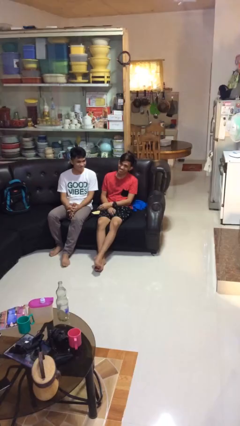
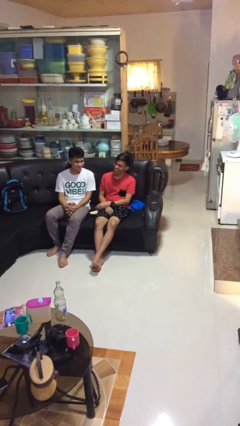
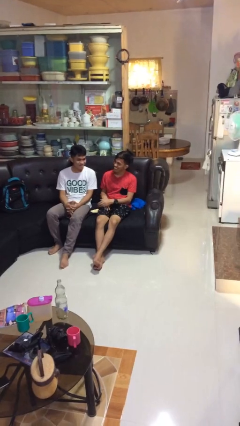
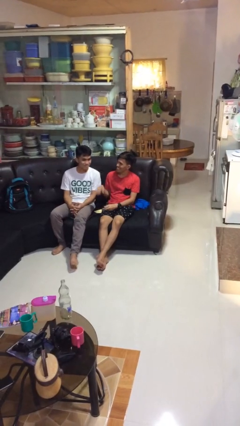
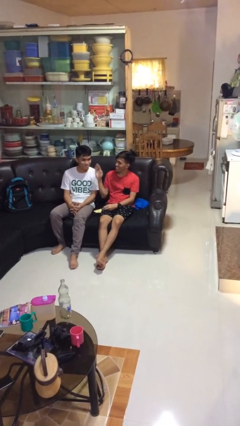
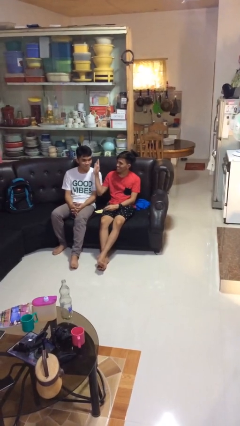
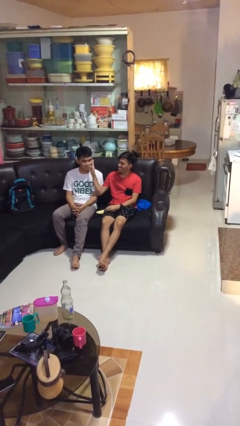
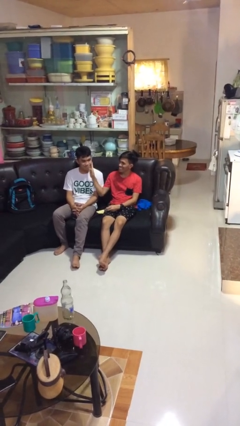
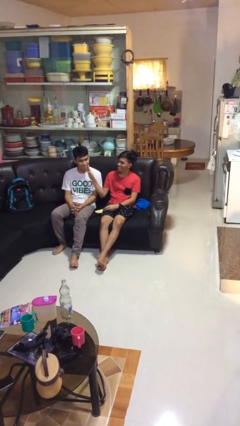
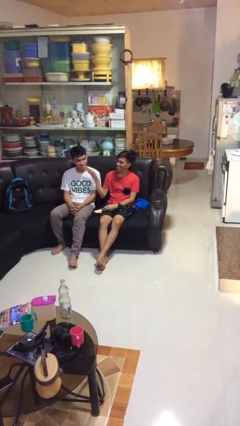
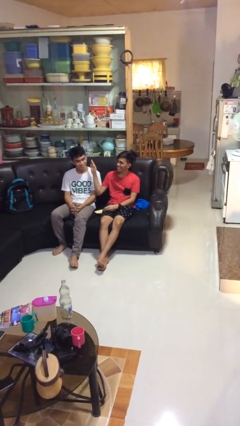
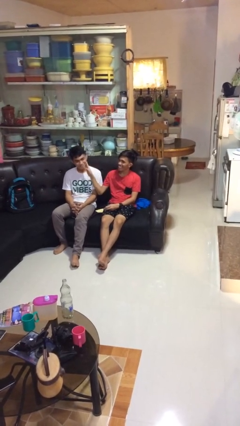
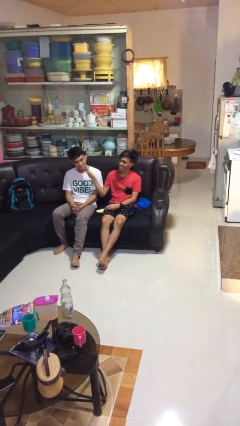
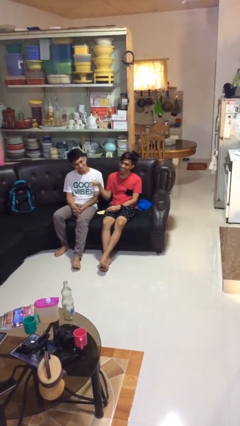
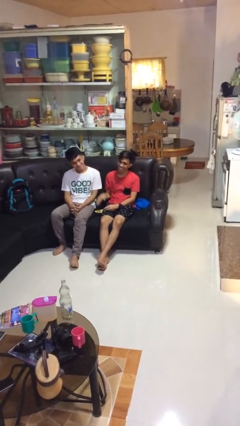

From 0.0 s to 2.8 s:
person touches face of person

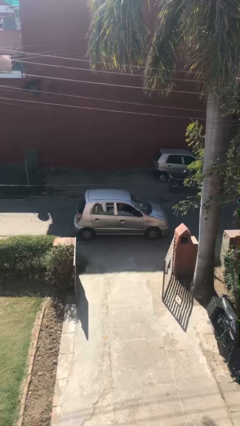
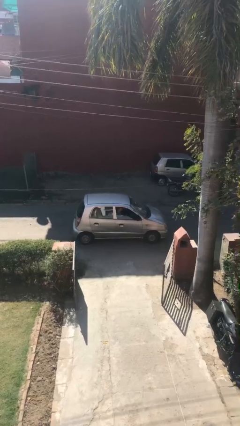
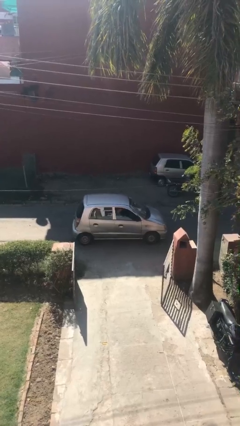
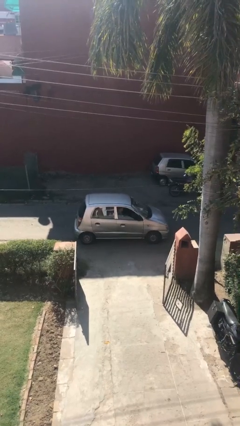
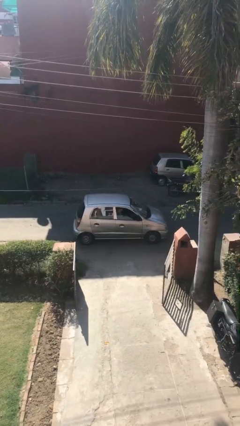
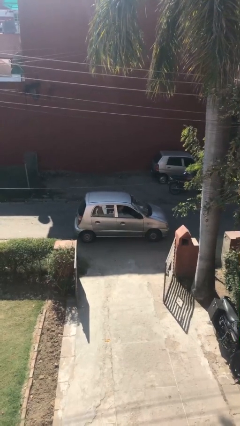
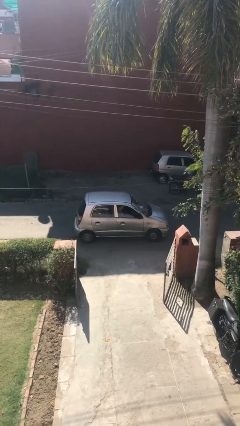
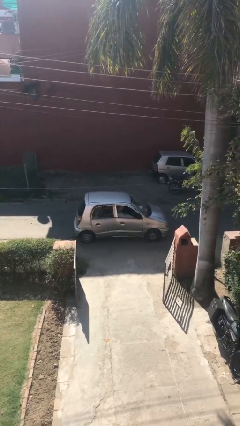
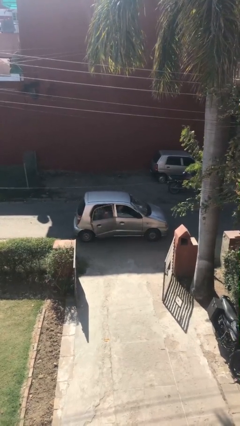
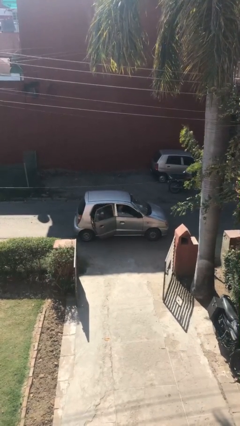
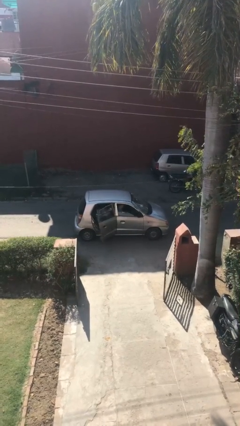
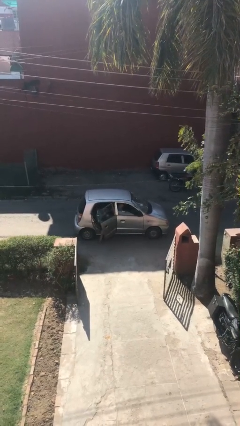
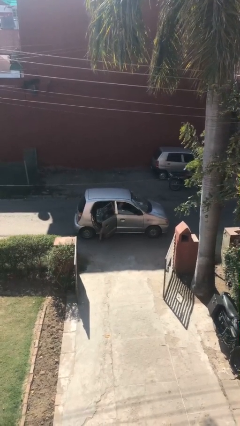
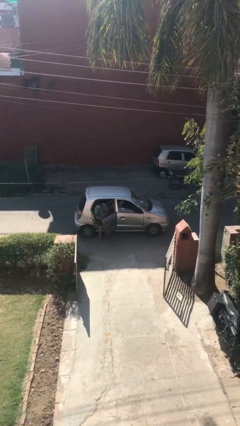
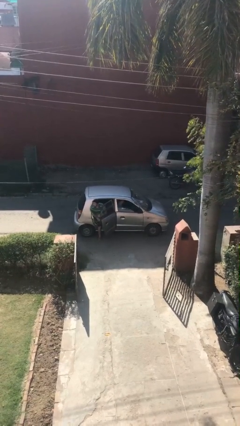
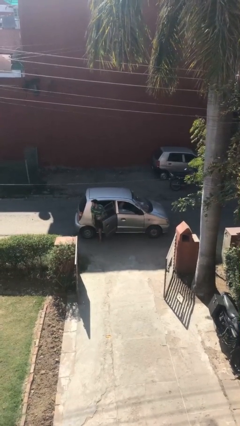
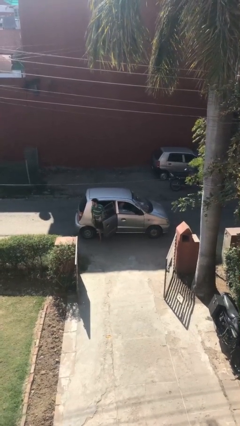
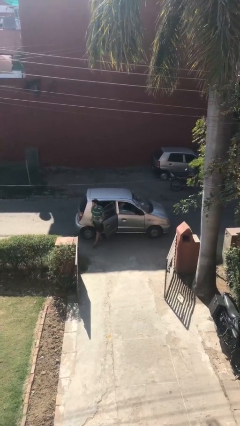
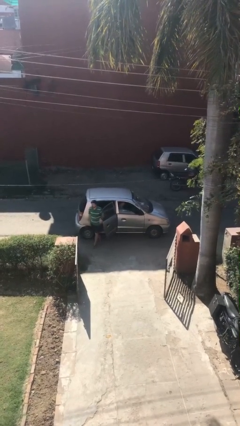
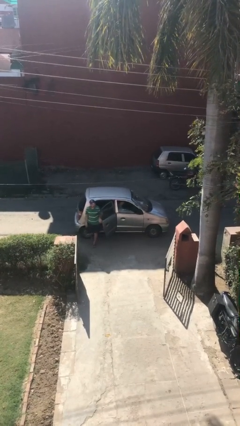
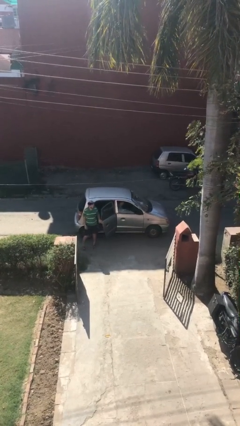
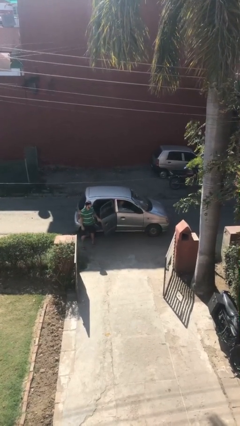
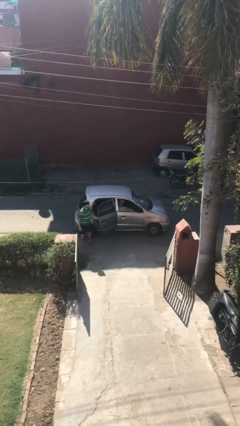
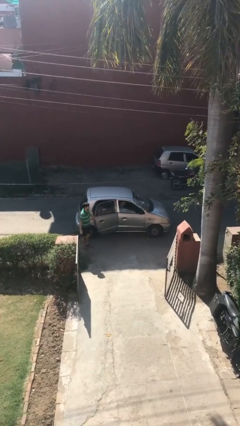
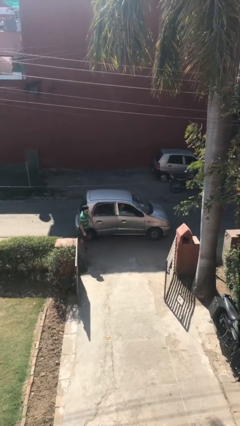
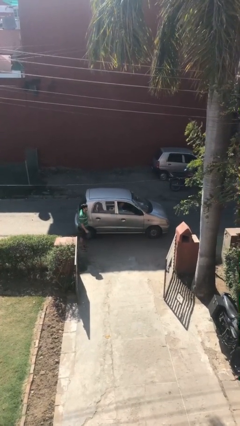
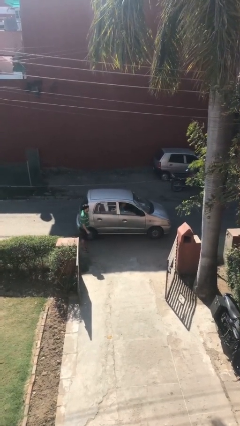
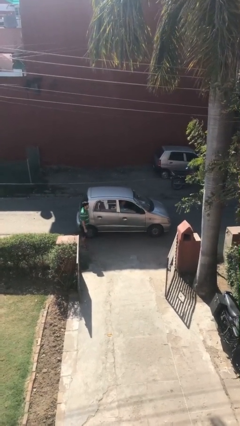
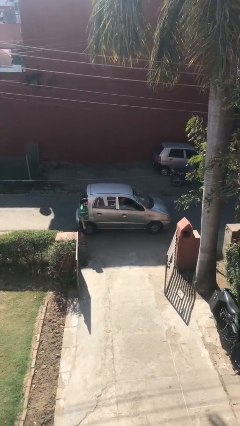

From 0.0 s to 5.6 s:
car drops off person

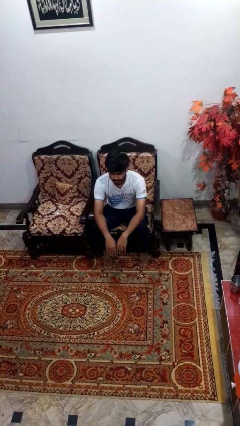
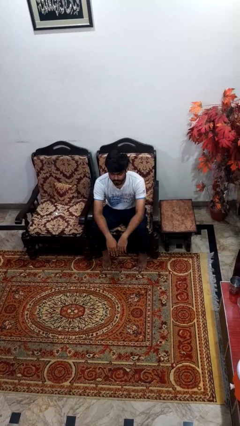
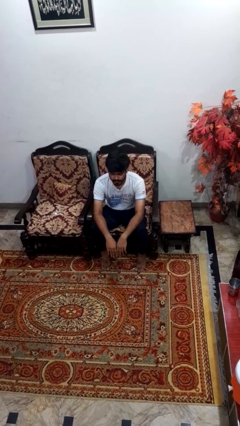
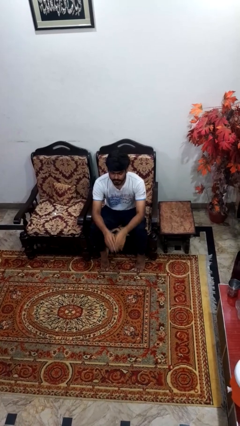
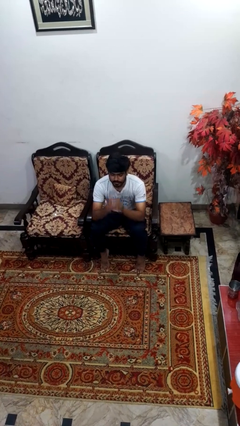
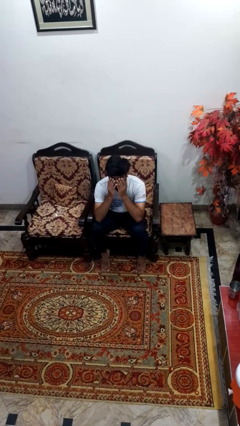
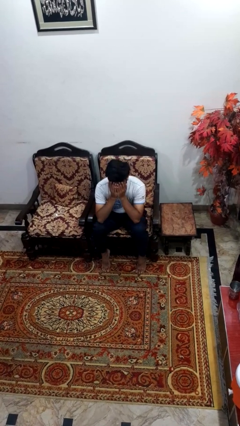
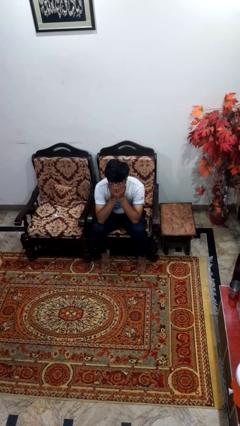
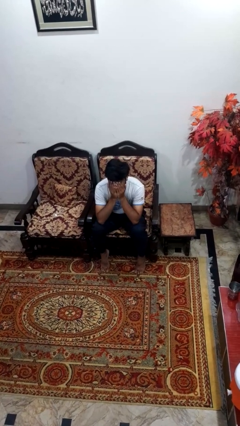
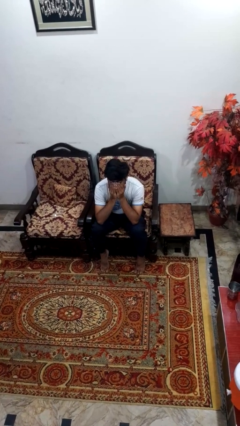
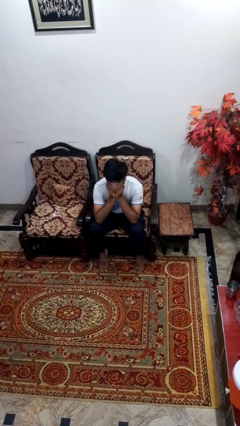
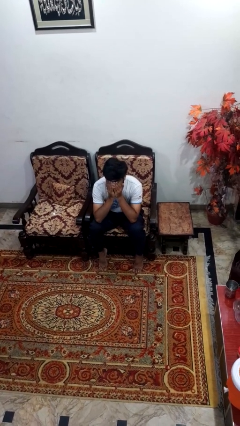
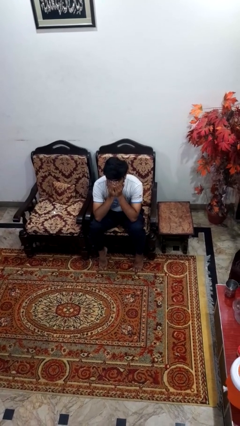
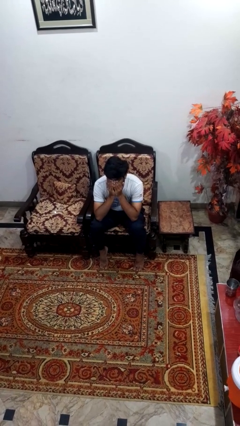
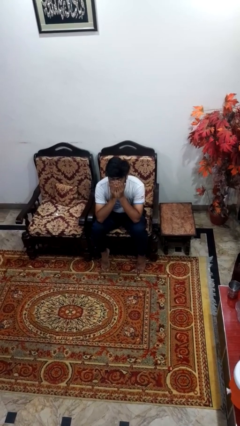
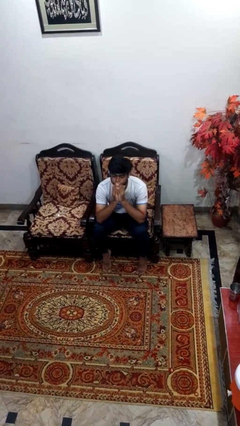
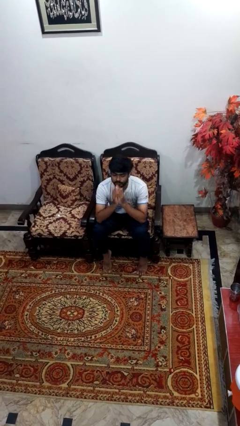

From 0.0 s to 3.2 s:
person covers face with hands

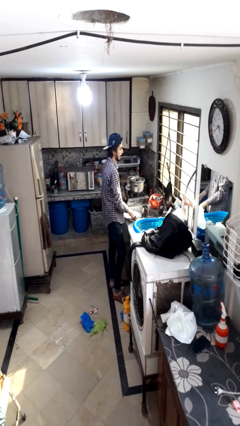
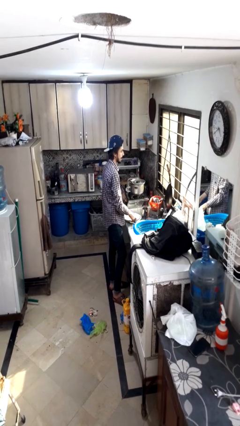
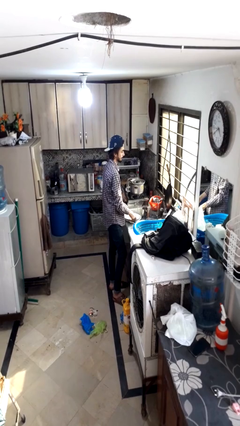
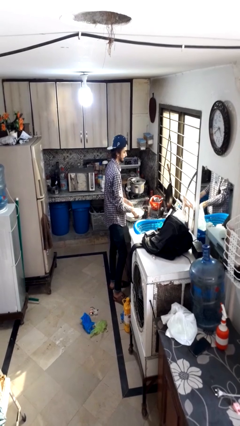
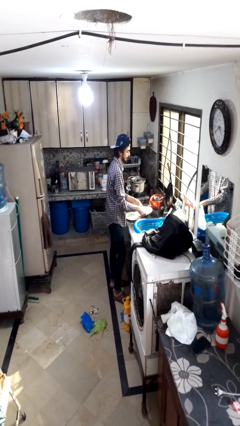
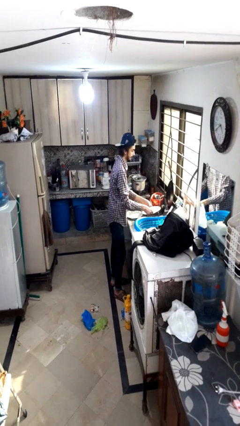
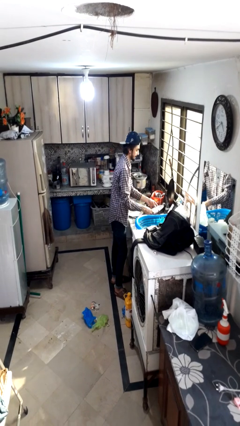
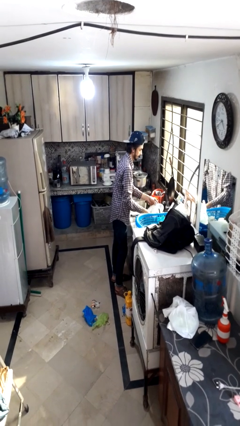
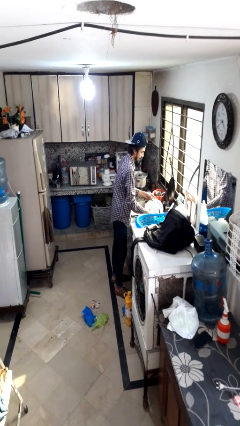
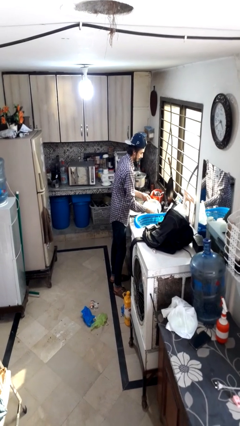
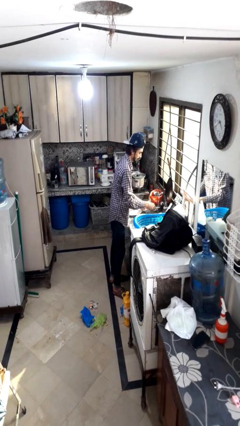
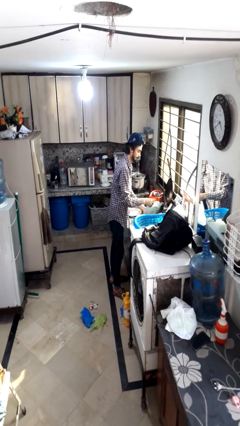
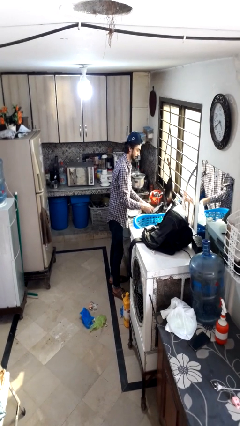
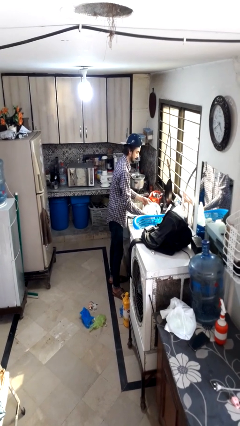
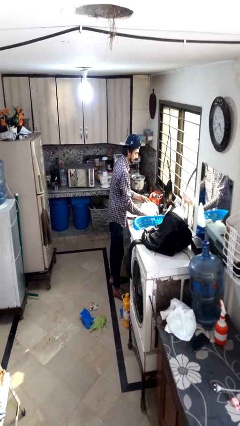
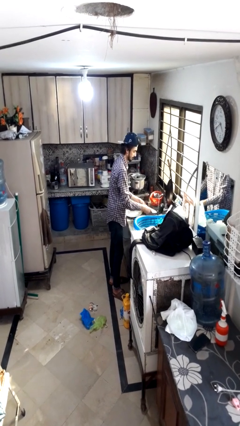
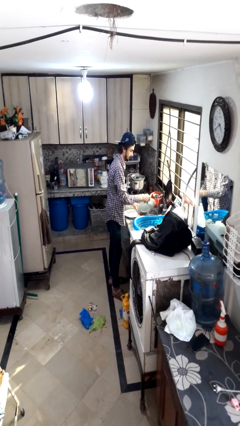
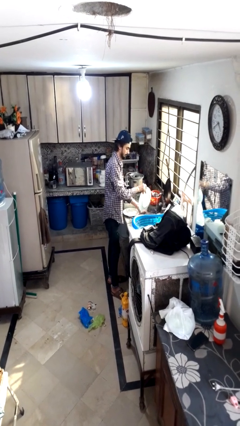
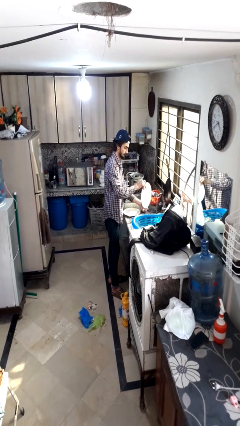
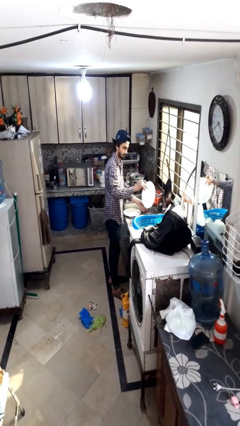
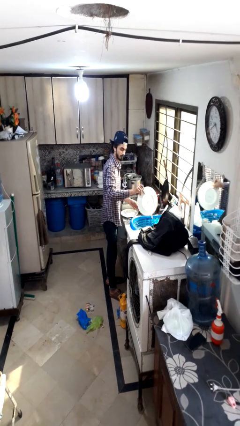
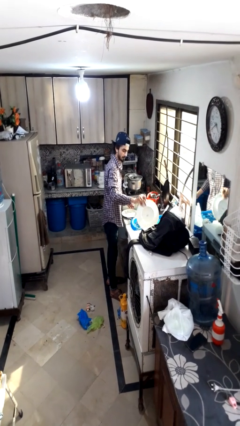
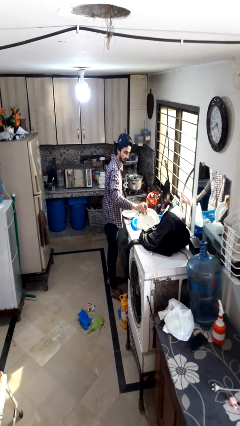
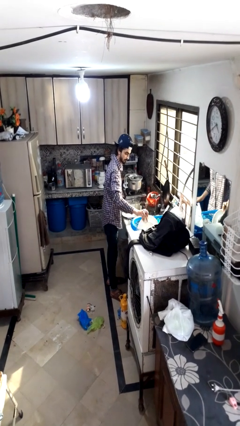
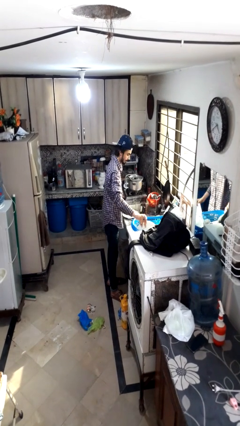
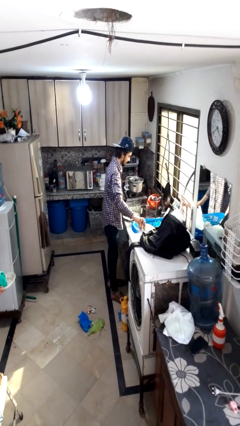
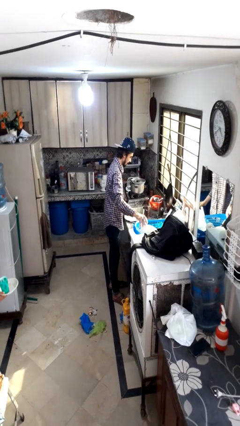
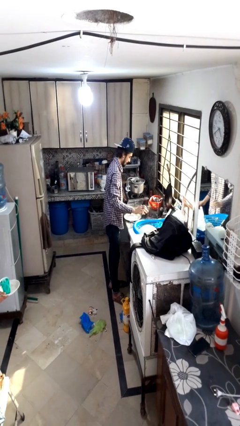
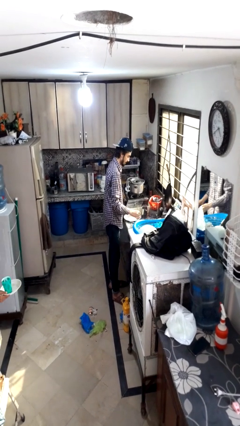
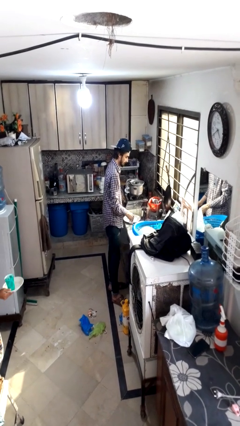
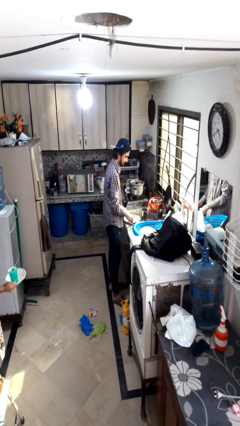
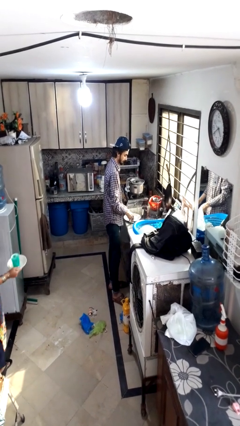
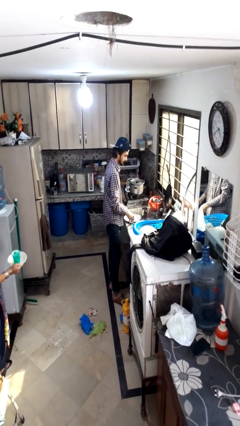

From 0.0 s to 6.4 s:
person washes dish
